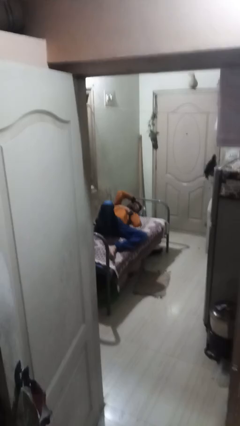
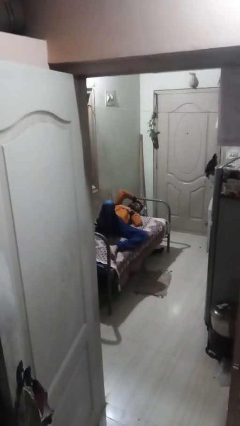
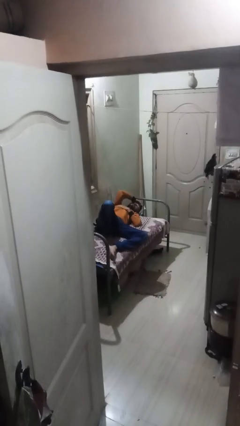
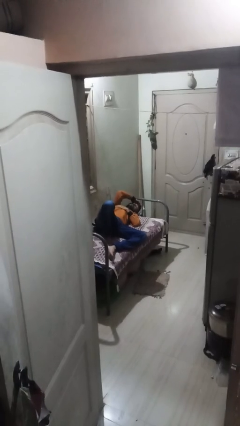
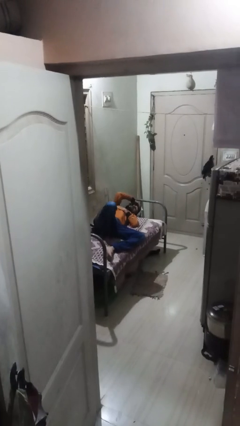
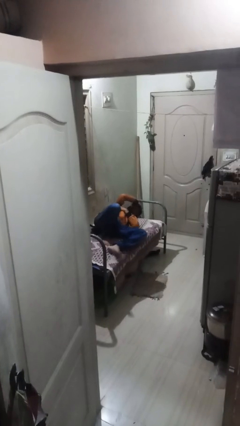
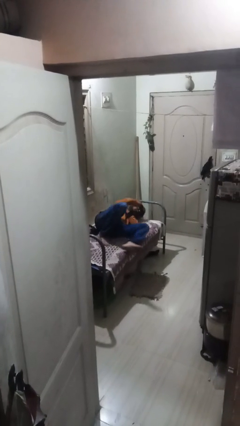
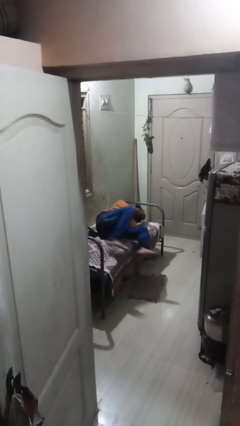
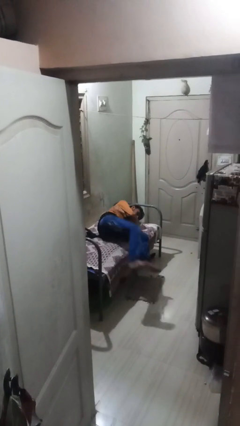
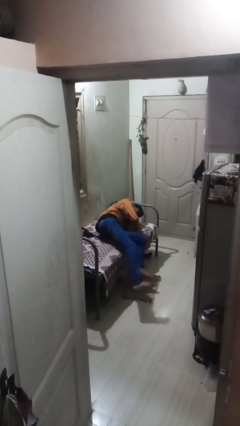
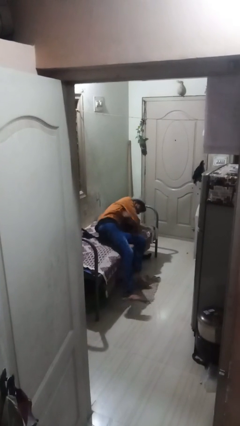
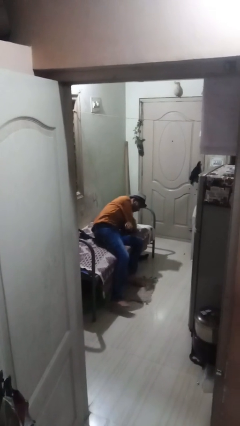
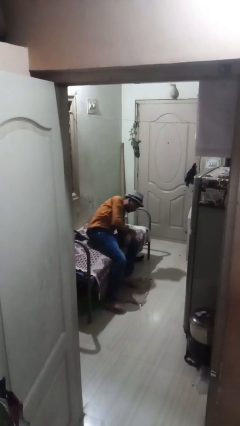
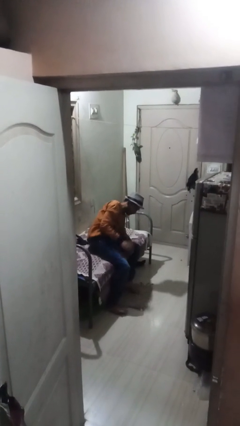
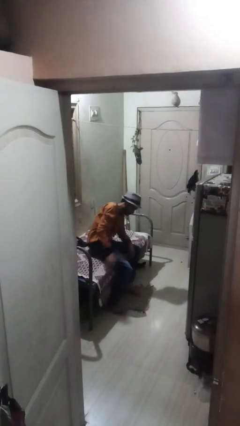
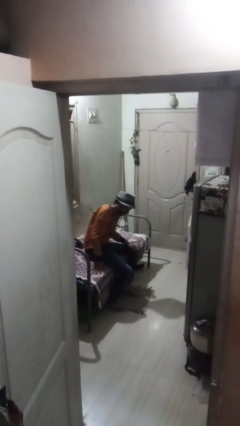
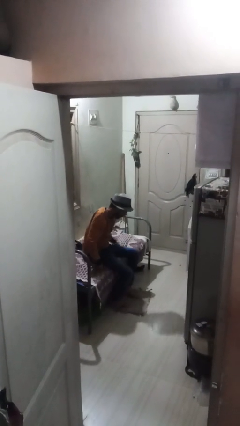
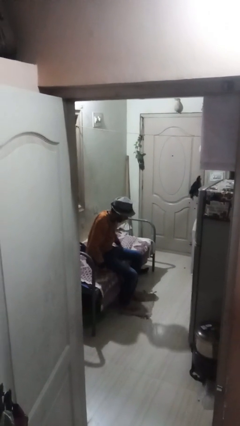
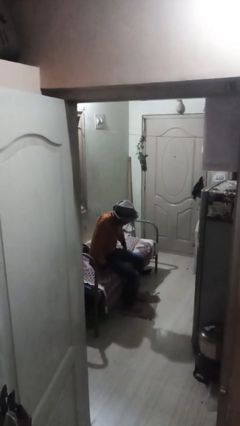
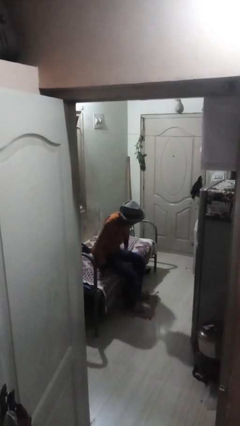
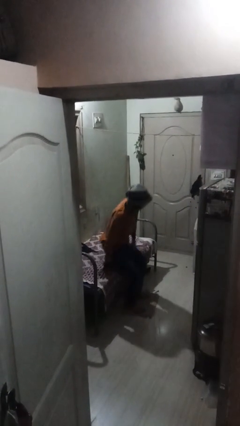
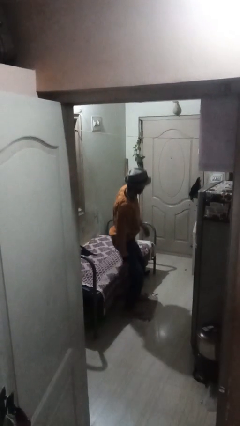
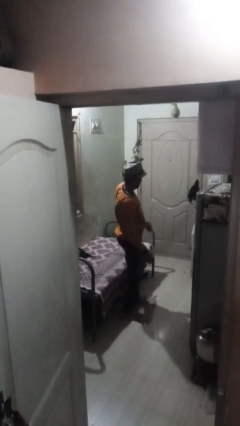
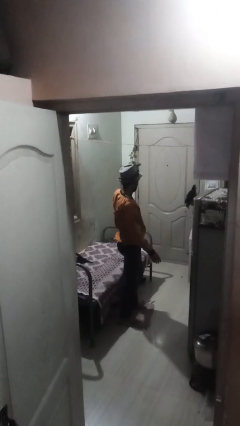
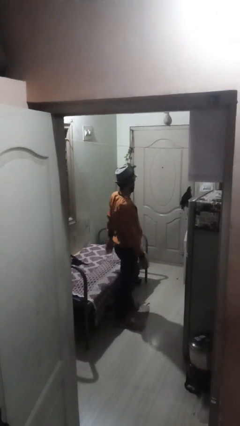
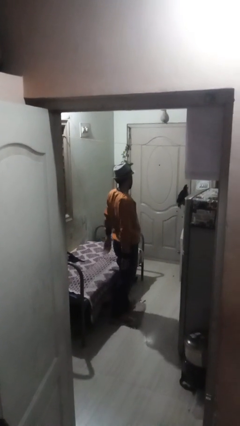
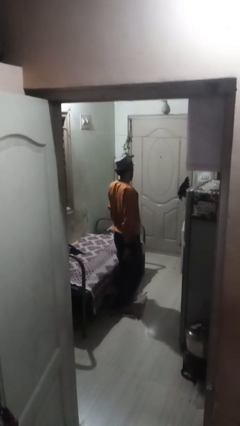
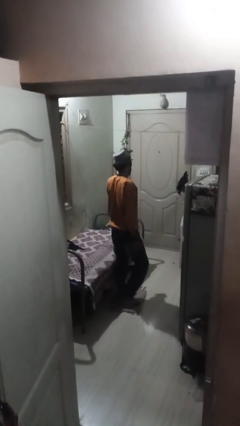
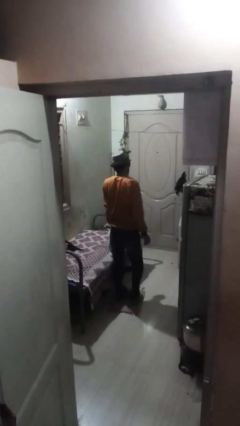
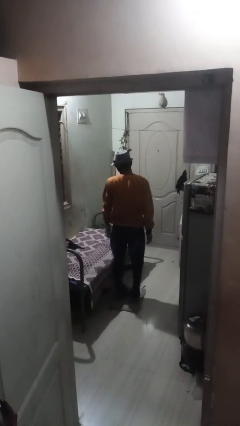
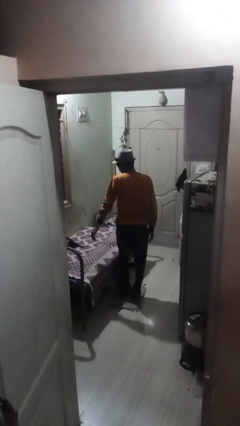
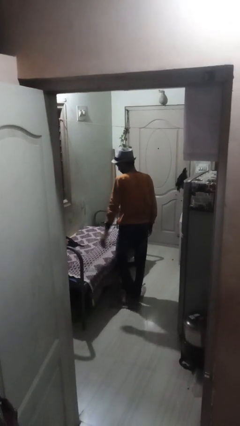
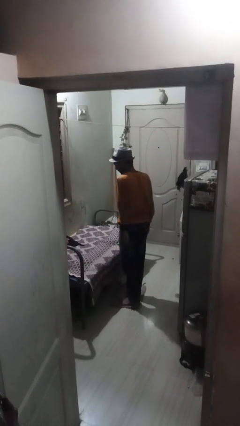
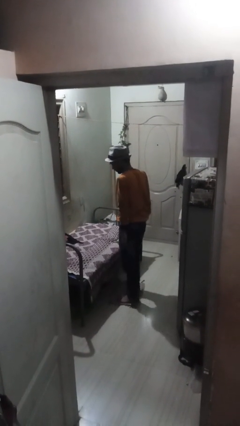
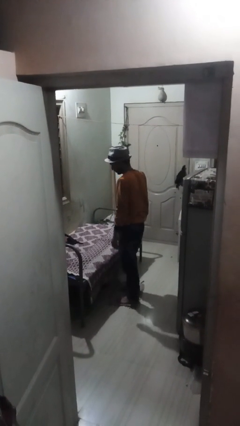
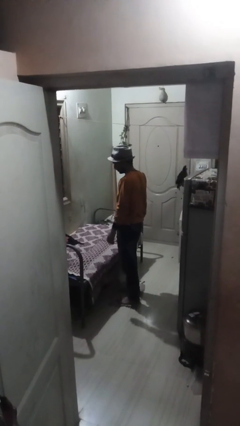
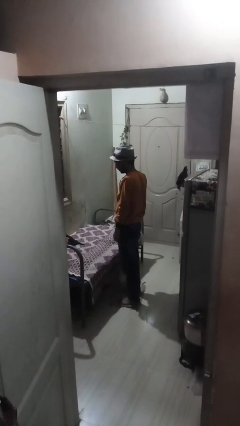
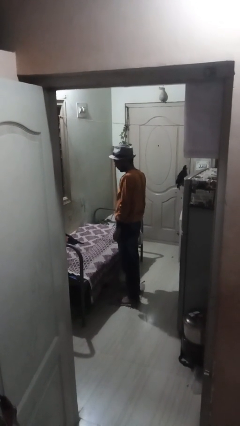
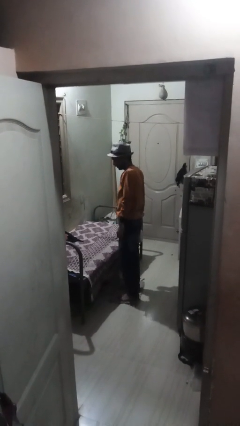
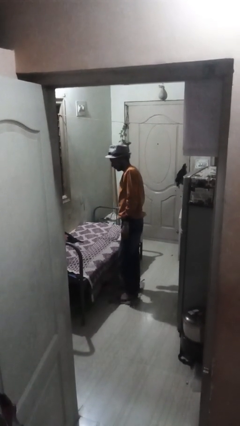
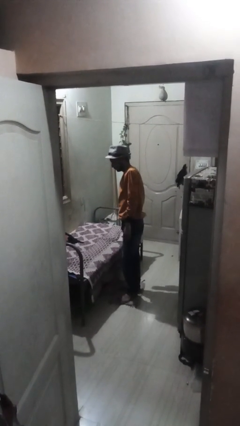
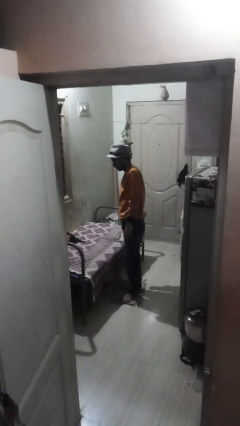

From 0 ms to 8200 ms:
person stands up

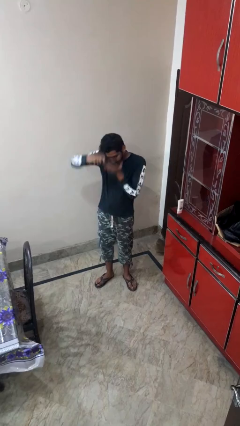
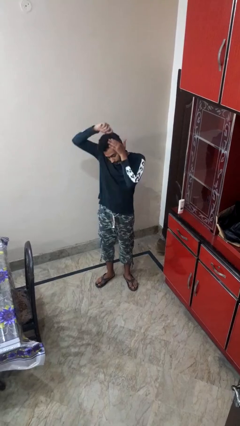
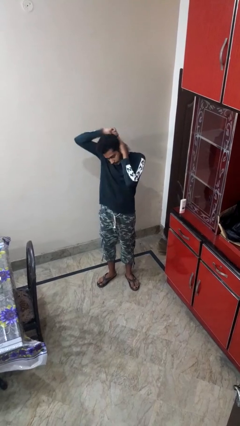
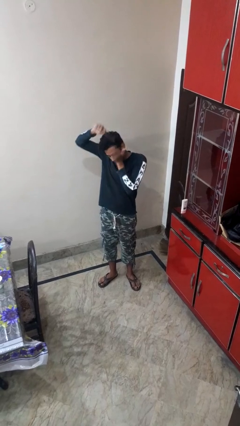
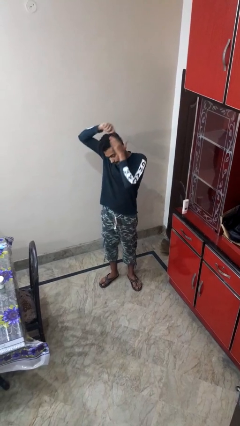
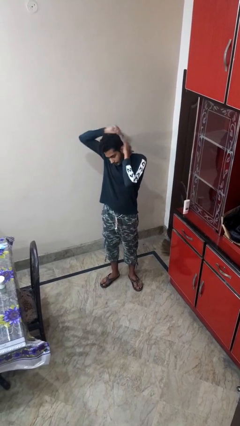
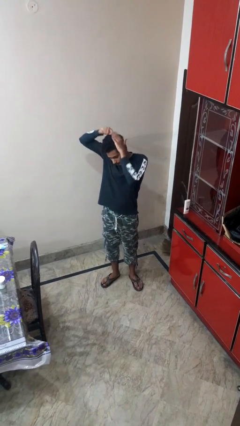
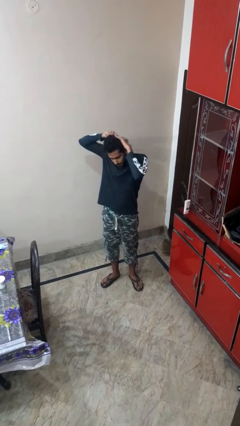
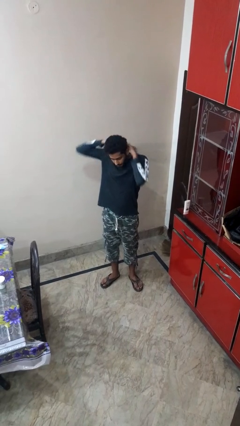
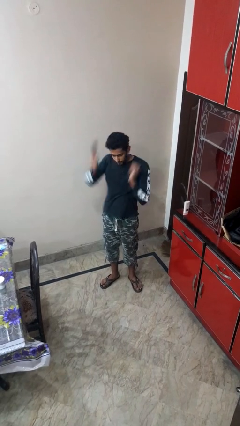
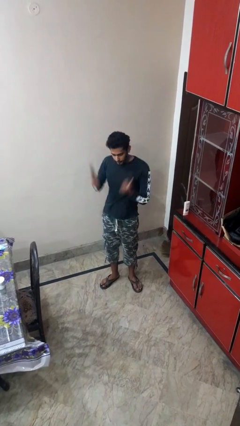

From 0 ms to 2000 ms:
person brushes hair

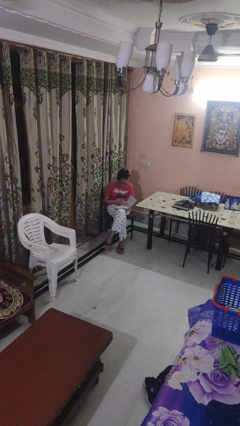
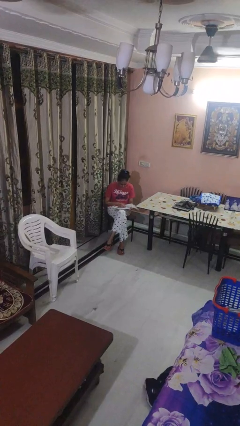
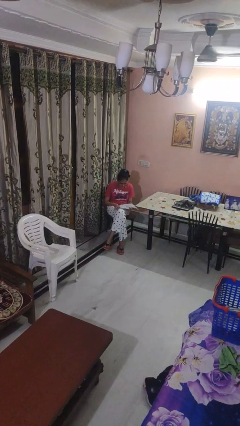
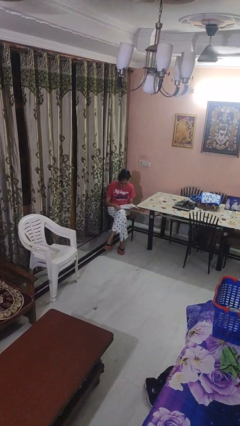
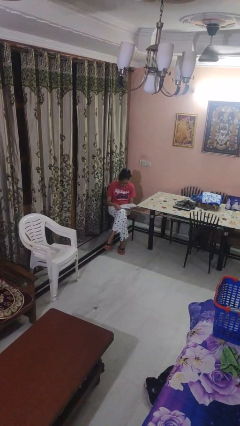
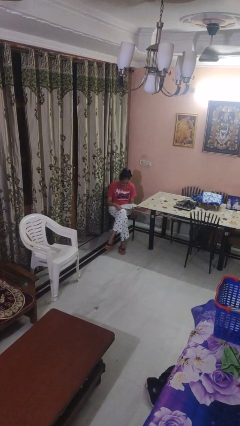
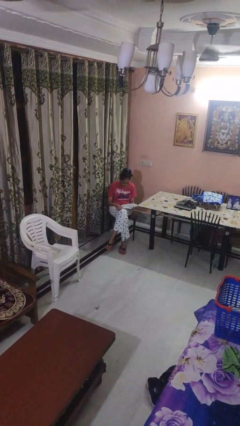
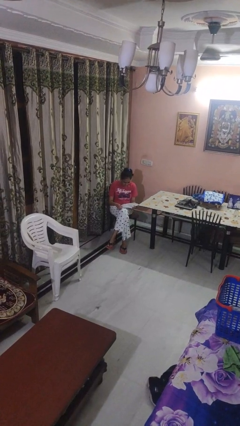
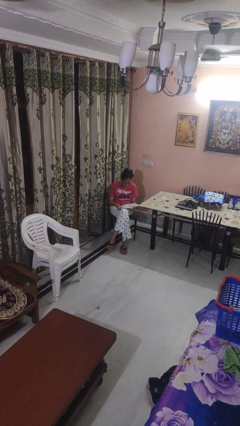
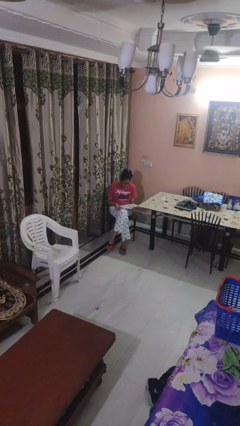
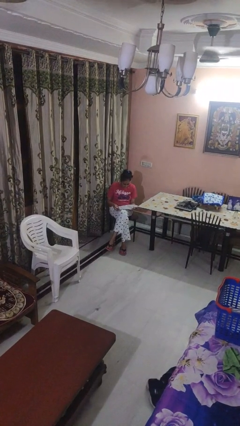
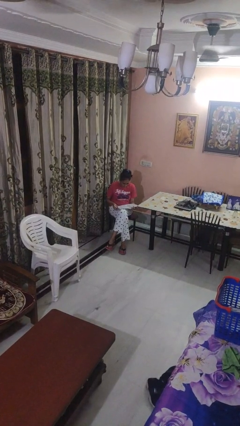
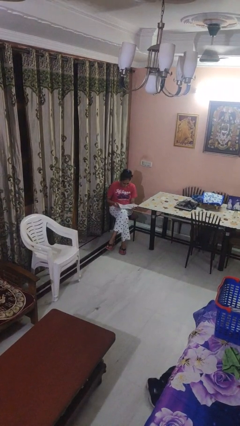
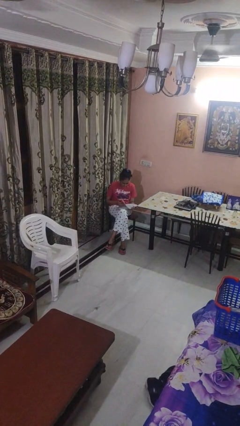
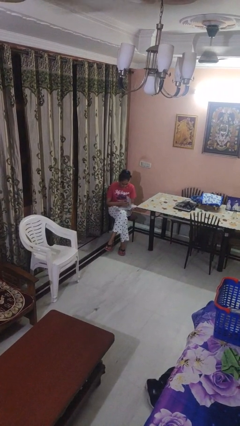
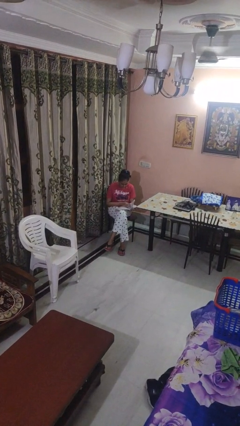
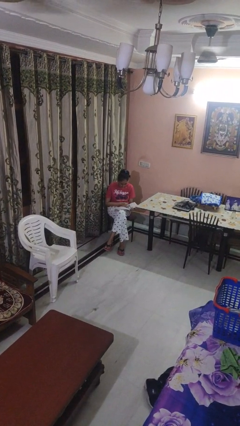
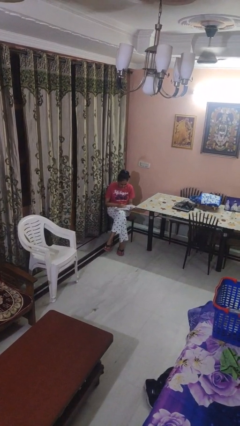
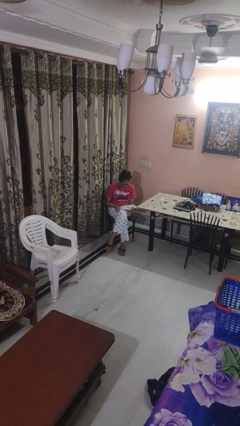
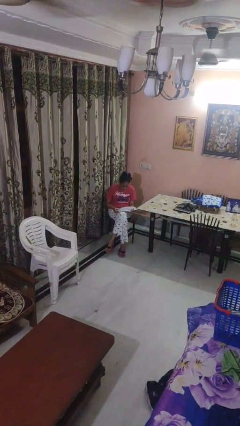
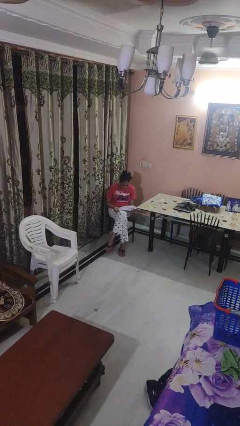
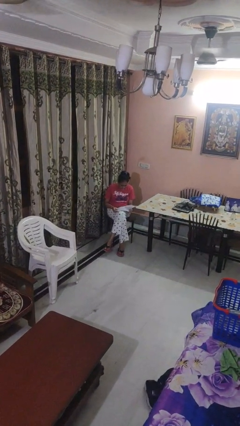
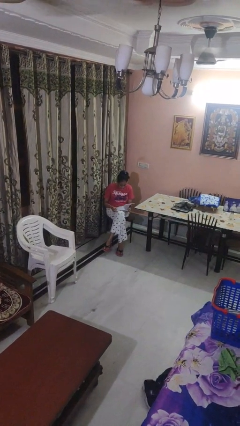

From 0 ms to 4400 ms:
person reads magazine

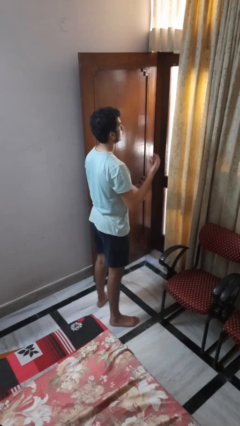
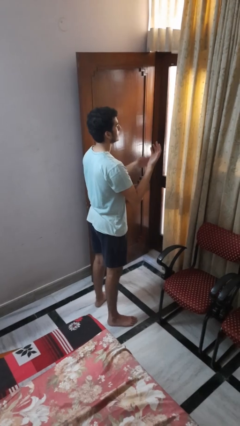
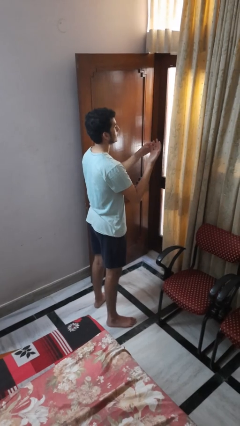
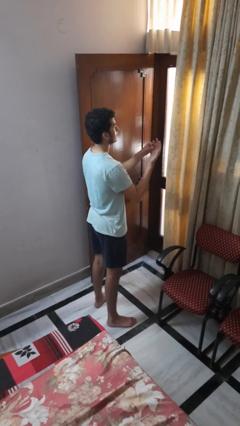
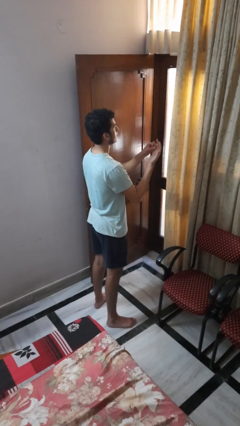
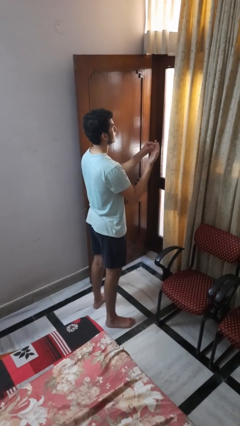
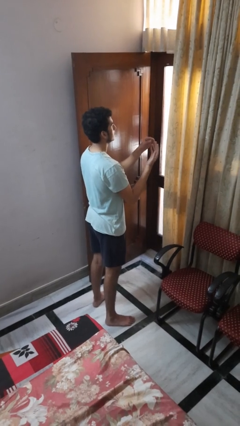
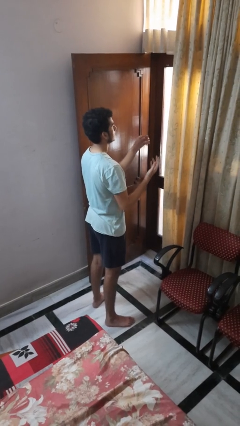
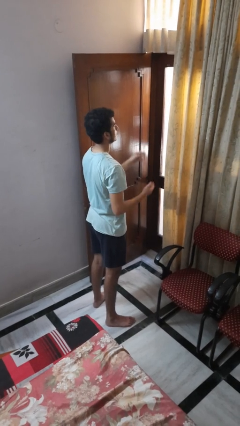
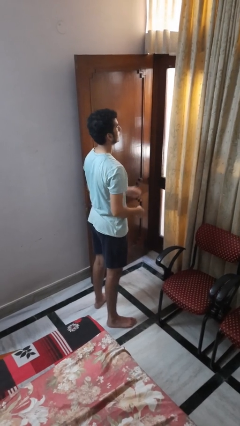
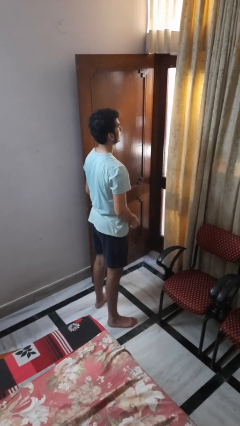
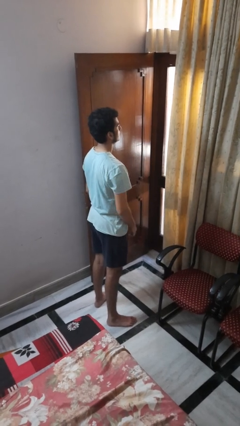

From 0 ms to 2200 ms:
person takes off ring

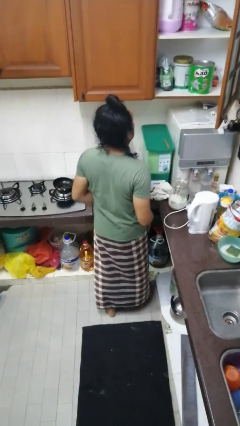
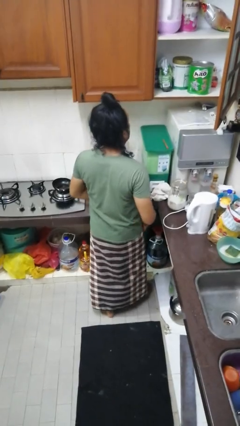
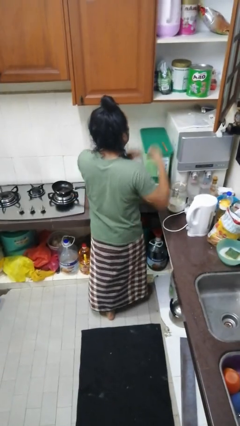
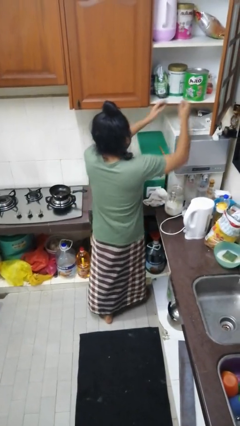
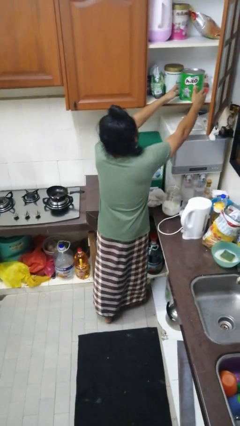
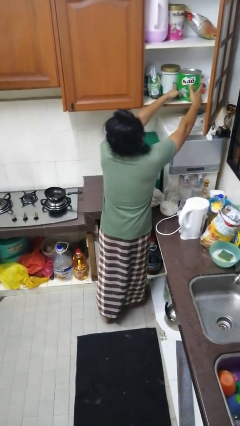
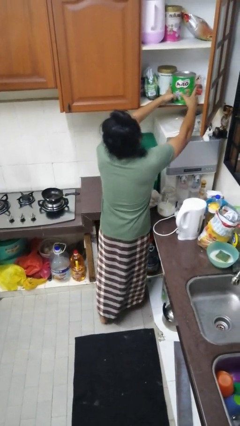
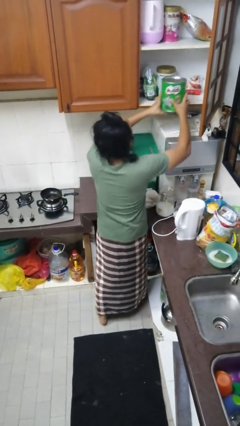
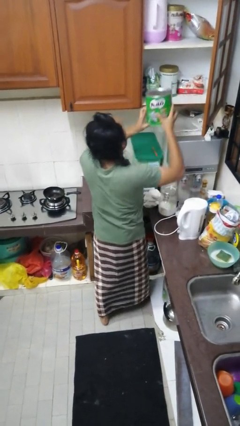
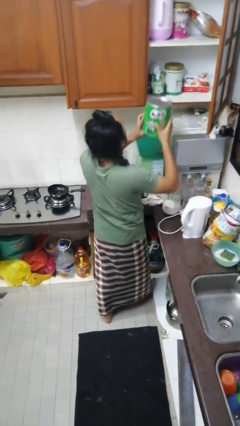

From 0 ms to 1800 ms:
person takes object from cabinet
